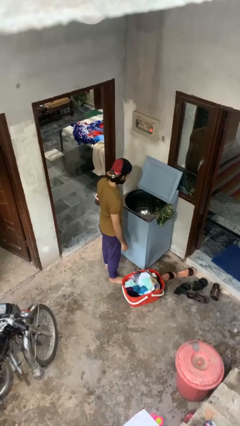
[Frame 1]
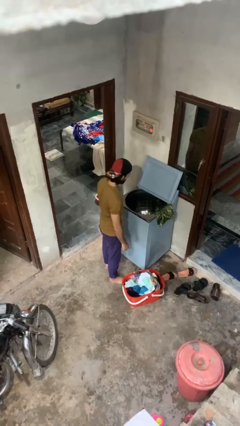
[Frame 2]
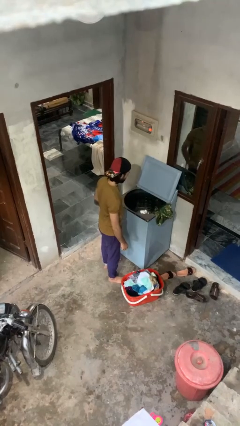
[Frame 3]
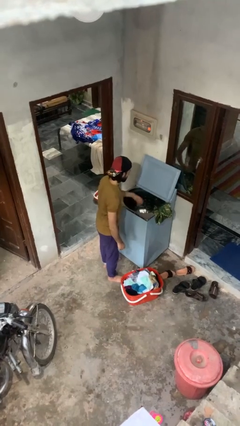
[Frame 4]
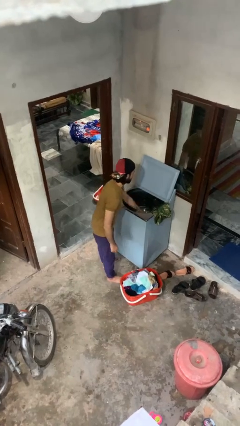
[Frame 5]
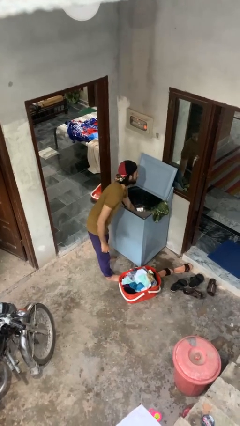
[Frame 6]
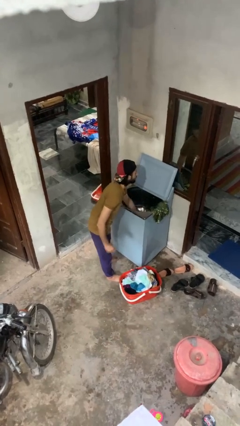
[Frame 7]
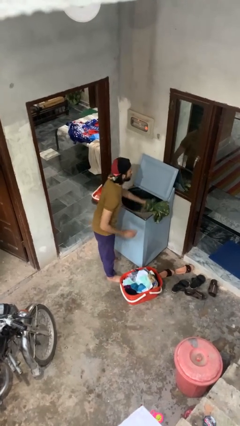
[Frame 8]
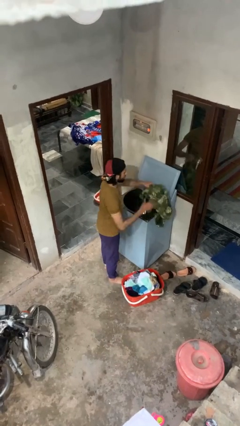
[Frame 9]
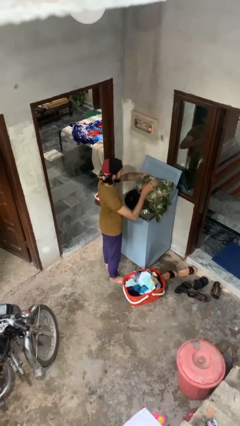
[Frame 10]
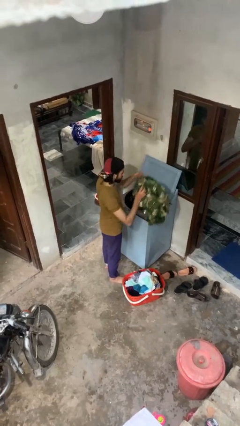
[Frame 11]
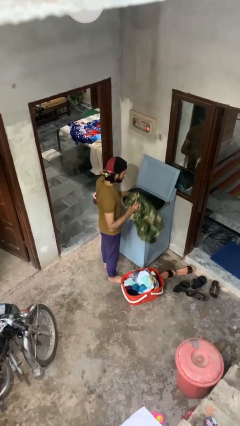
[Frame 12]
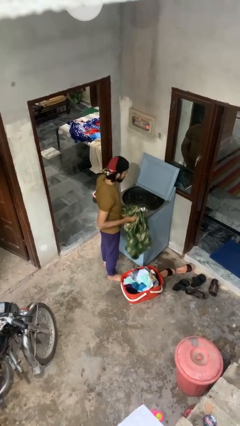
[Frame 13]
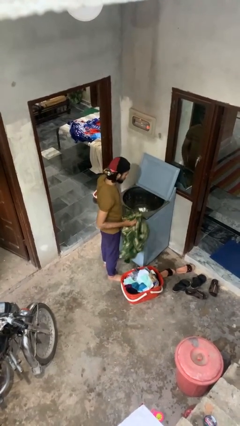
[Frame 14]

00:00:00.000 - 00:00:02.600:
person unloads clotheswasher

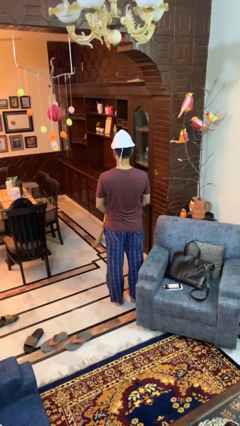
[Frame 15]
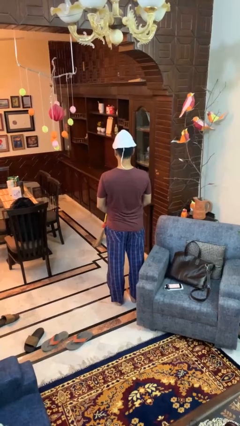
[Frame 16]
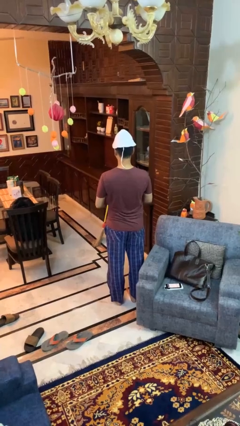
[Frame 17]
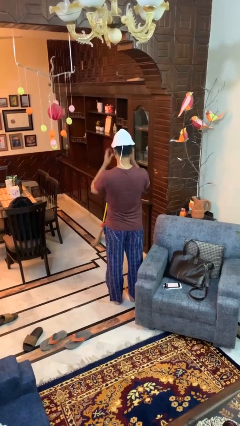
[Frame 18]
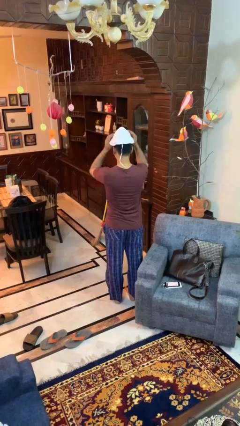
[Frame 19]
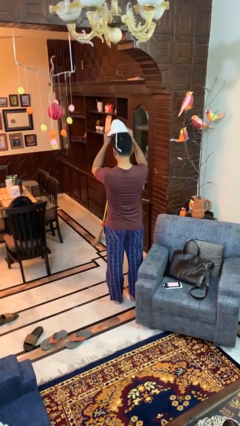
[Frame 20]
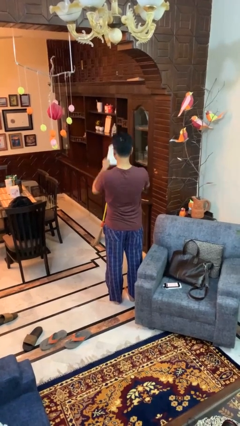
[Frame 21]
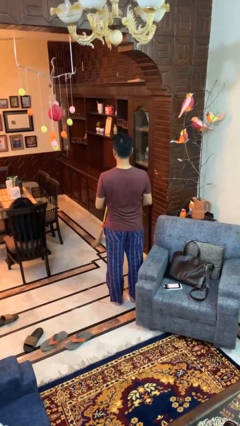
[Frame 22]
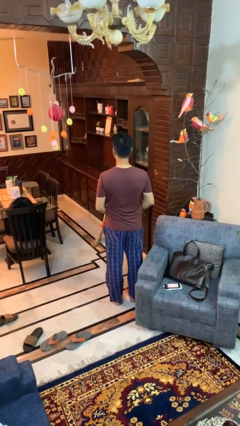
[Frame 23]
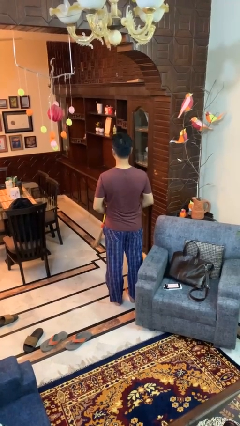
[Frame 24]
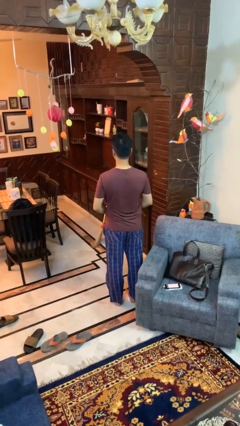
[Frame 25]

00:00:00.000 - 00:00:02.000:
person takes off hat

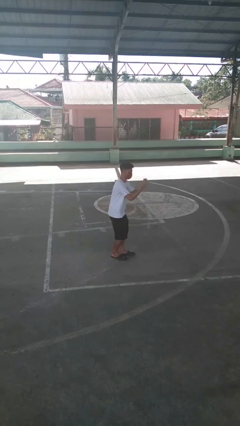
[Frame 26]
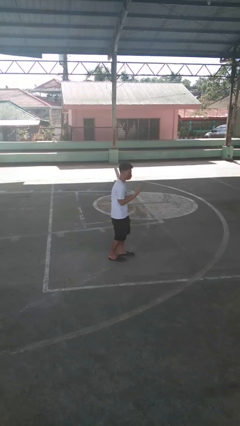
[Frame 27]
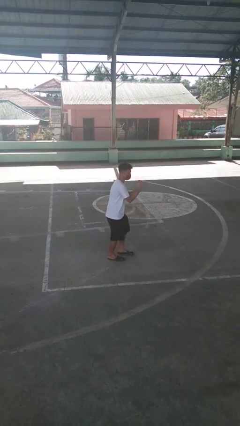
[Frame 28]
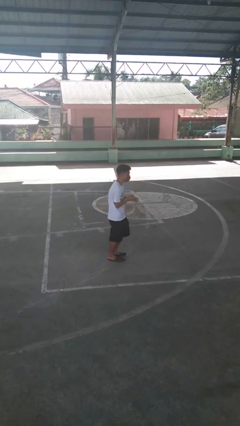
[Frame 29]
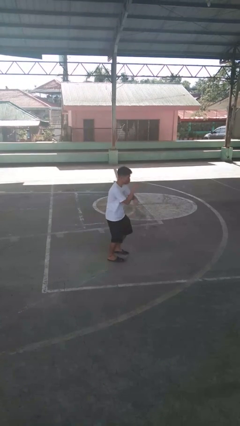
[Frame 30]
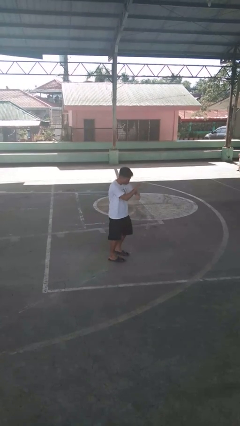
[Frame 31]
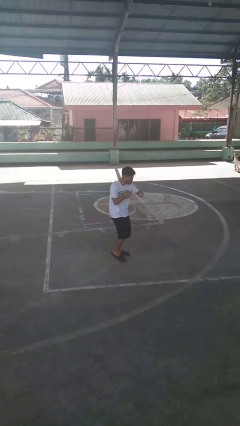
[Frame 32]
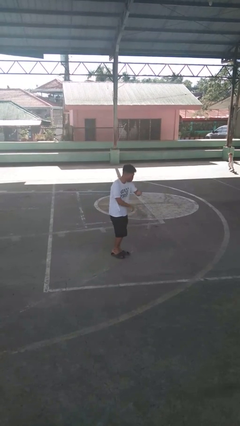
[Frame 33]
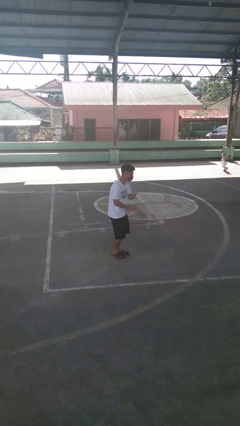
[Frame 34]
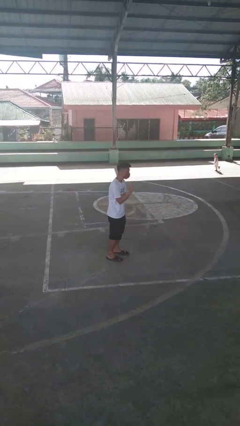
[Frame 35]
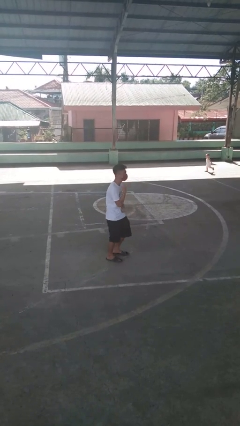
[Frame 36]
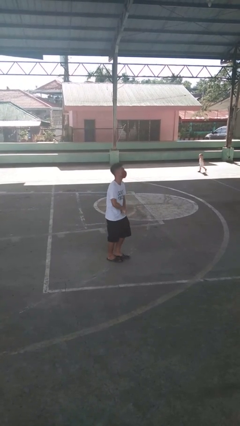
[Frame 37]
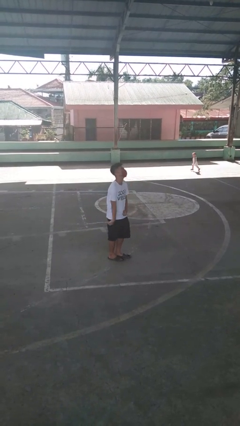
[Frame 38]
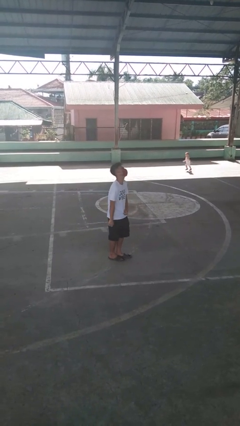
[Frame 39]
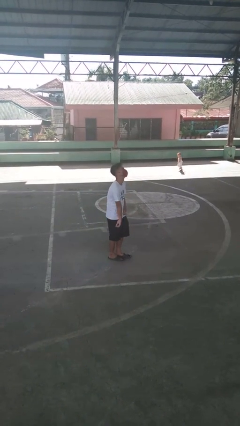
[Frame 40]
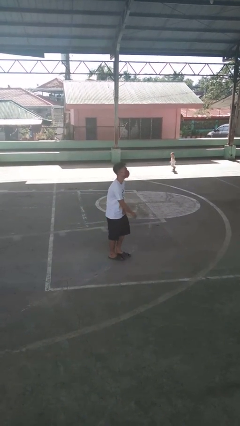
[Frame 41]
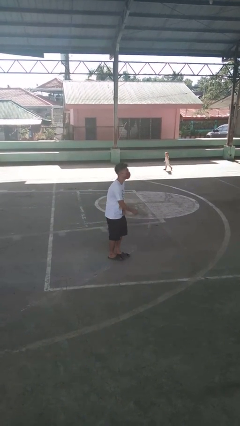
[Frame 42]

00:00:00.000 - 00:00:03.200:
person dances in place

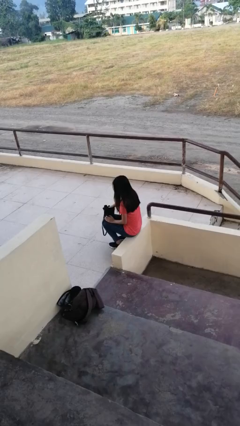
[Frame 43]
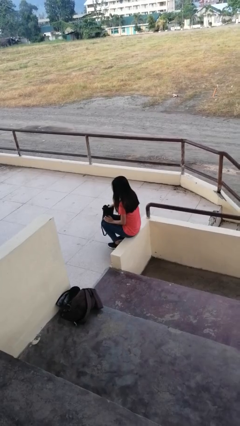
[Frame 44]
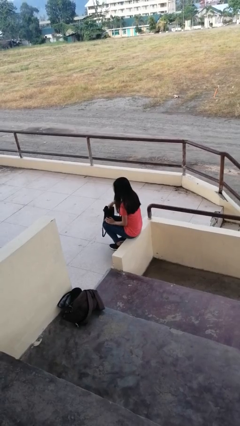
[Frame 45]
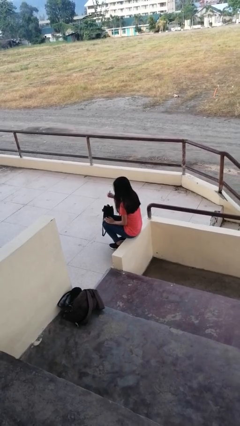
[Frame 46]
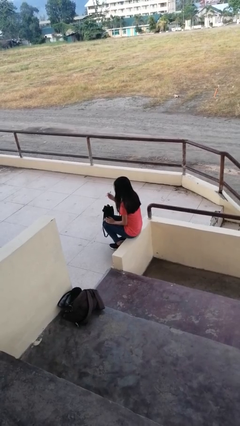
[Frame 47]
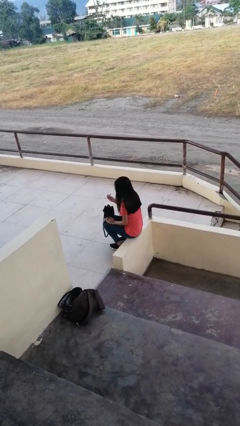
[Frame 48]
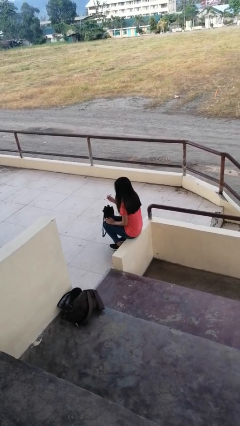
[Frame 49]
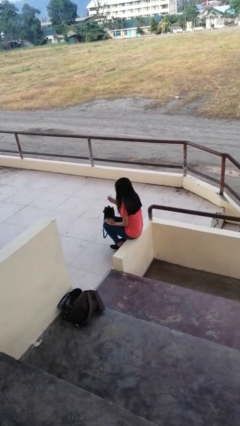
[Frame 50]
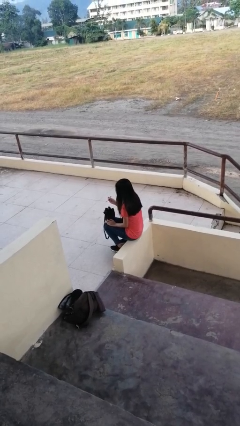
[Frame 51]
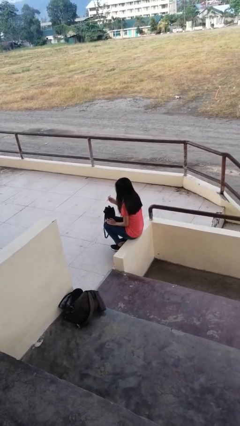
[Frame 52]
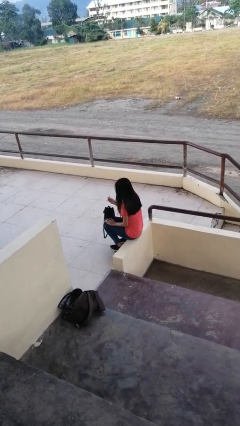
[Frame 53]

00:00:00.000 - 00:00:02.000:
person takes object from purse

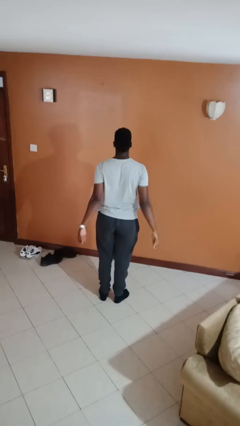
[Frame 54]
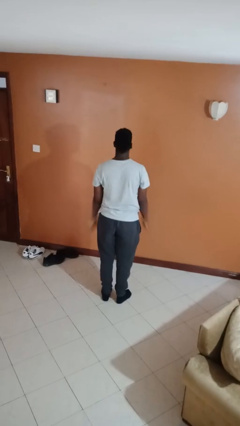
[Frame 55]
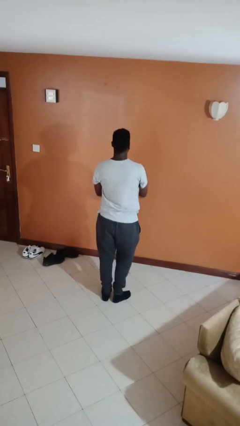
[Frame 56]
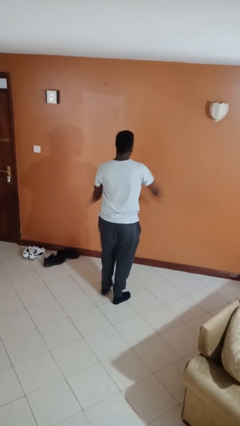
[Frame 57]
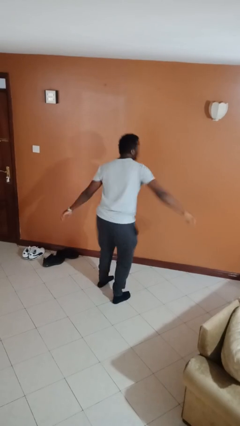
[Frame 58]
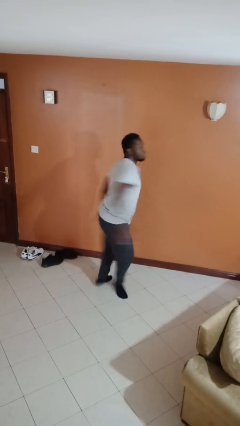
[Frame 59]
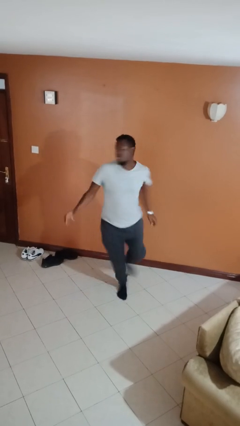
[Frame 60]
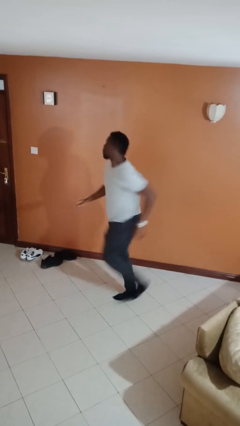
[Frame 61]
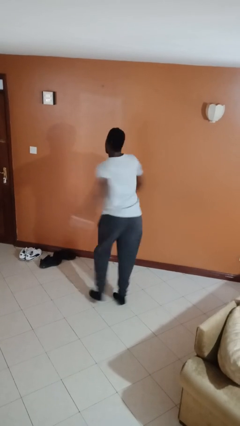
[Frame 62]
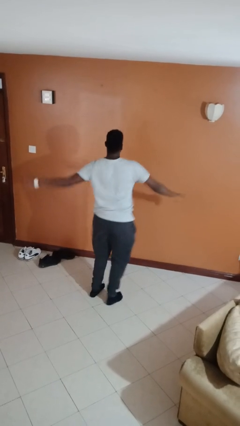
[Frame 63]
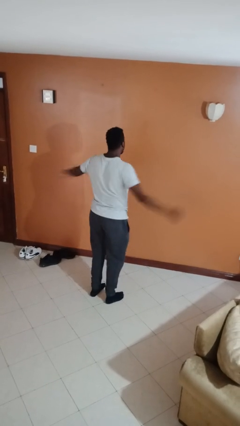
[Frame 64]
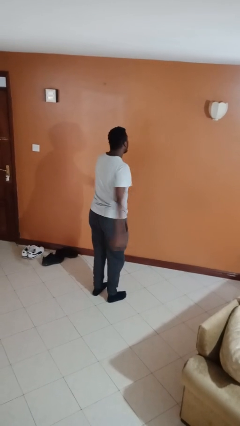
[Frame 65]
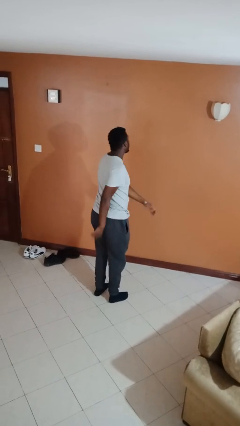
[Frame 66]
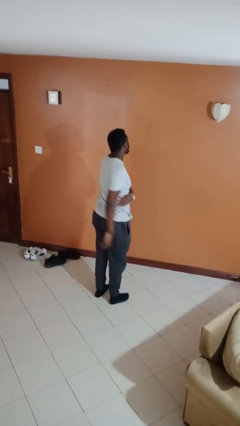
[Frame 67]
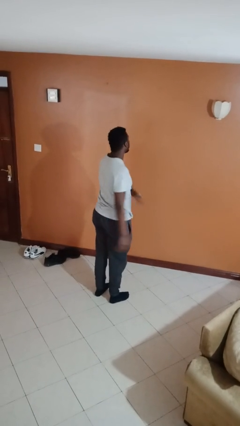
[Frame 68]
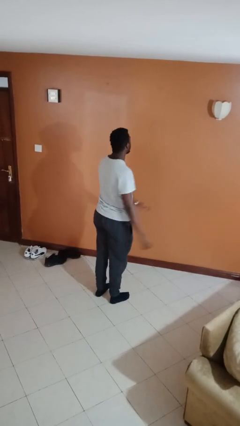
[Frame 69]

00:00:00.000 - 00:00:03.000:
person twirls

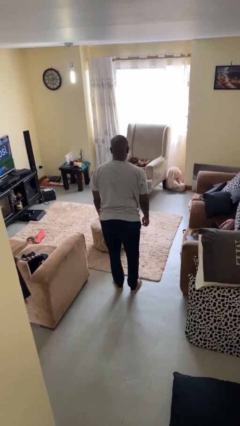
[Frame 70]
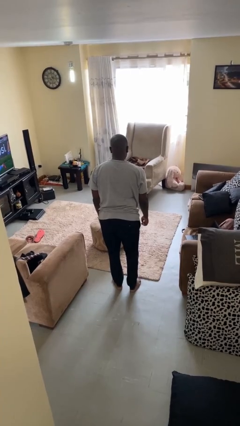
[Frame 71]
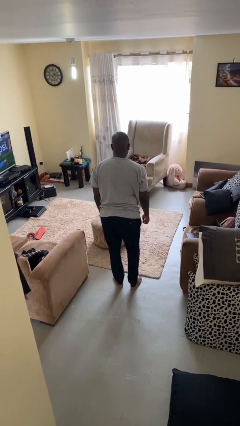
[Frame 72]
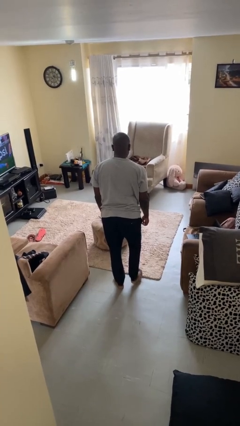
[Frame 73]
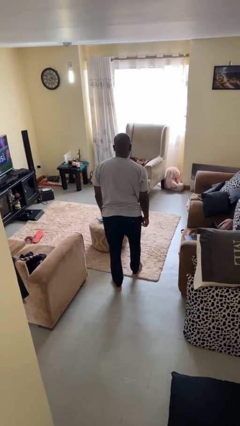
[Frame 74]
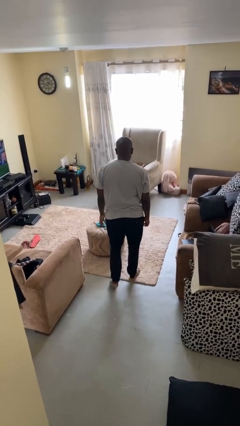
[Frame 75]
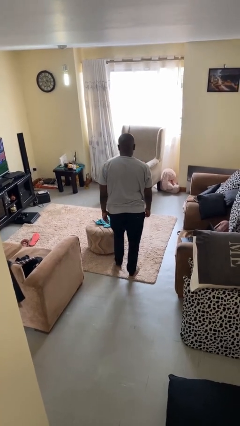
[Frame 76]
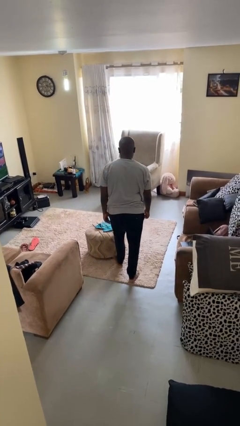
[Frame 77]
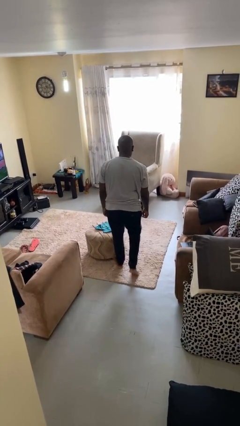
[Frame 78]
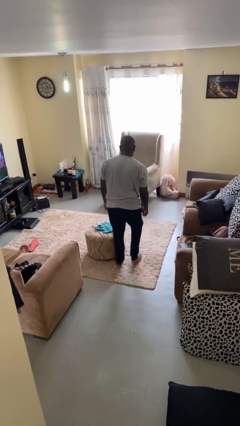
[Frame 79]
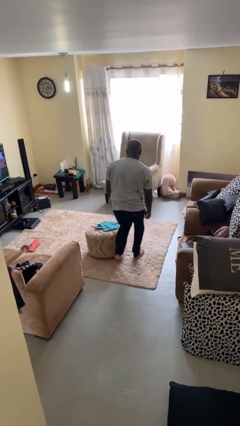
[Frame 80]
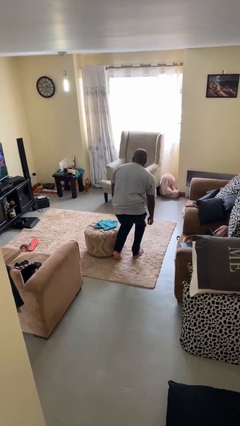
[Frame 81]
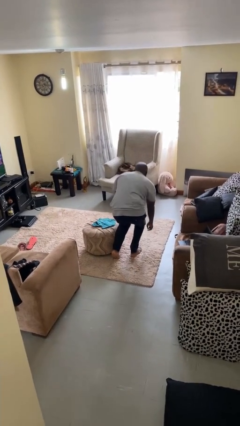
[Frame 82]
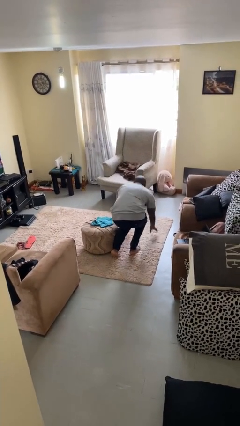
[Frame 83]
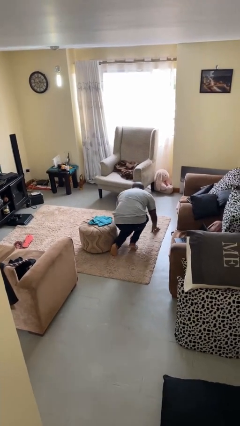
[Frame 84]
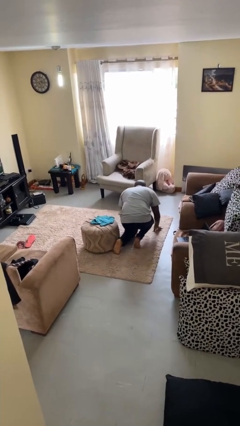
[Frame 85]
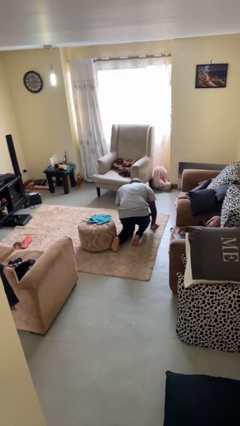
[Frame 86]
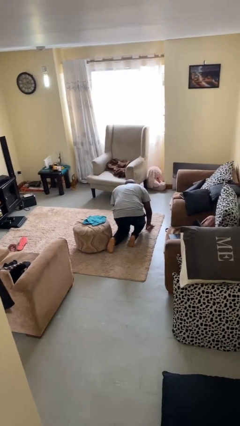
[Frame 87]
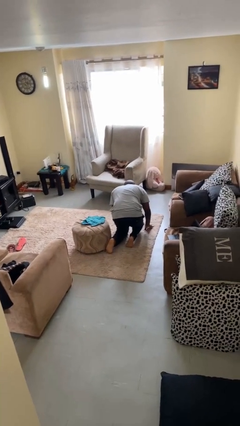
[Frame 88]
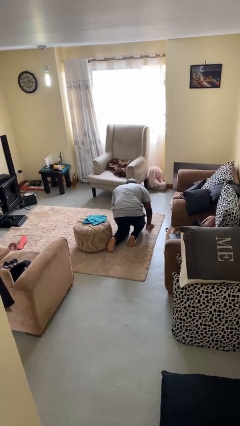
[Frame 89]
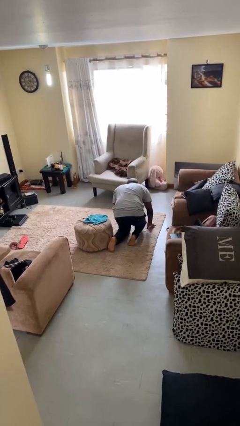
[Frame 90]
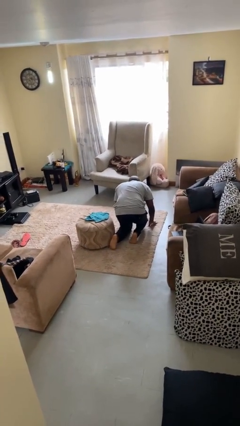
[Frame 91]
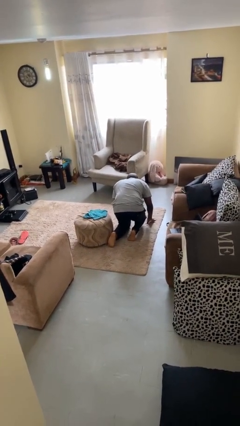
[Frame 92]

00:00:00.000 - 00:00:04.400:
person trips on object on floor

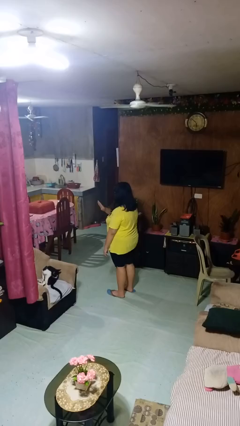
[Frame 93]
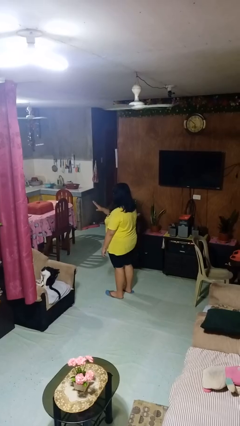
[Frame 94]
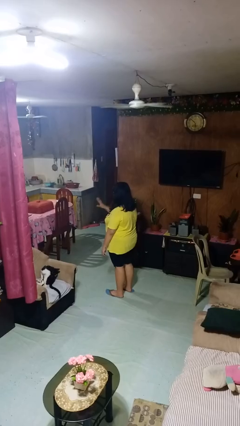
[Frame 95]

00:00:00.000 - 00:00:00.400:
person gestures swipe right
